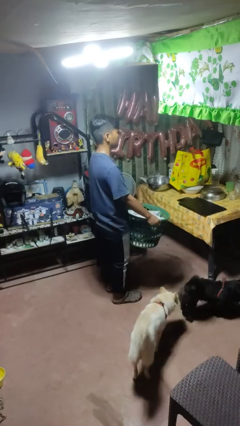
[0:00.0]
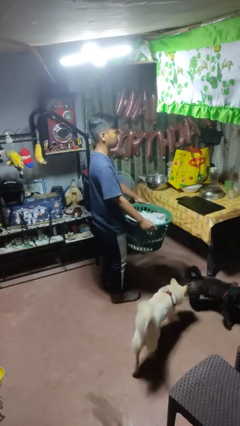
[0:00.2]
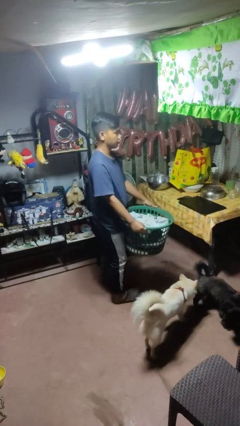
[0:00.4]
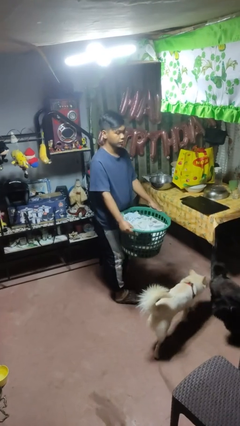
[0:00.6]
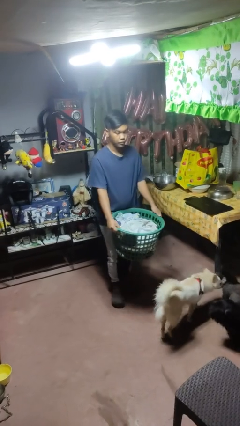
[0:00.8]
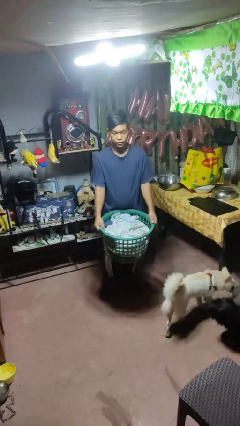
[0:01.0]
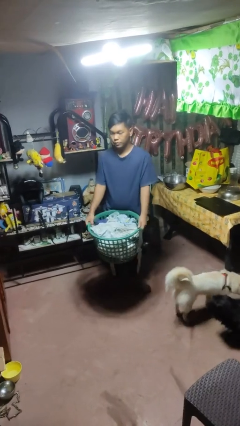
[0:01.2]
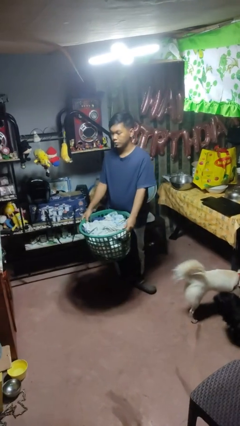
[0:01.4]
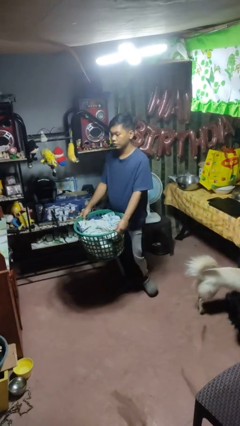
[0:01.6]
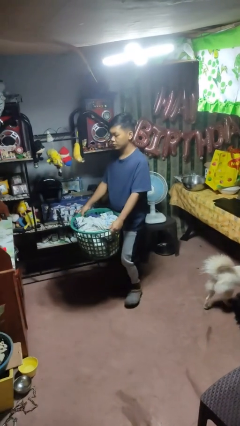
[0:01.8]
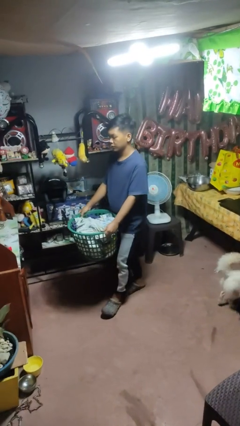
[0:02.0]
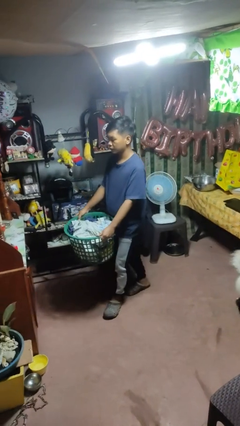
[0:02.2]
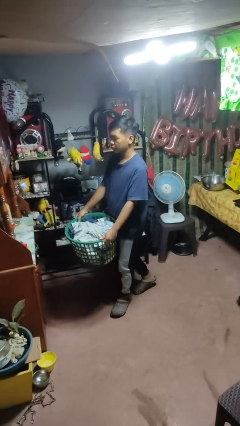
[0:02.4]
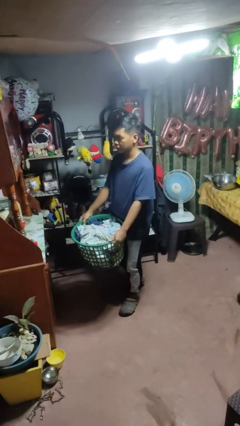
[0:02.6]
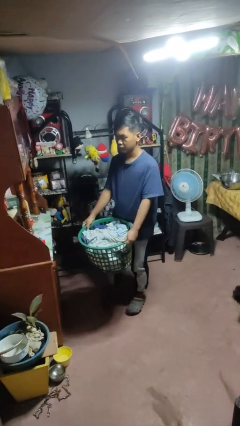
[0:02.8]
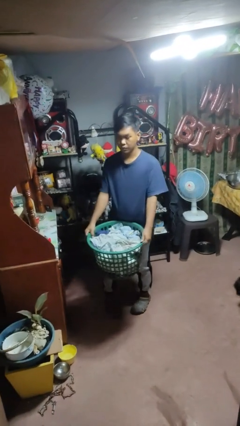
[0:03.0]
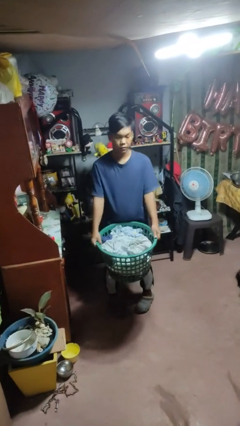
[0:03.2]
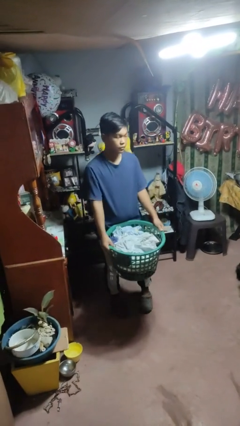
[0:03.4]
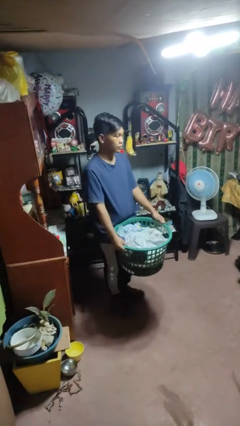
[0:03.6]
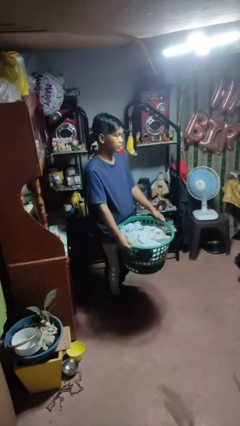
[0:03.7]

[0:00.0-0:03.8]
person carries laundry basket

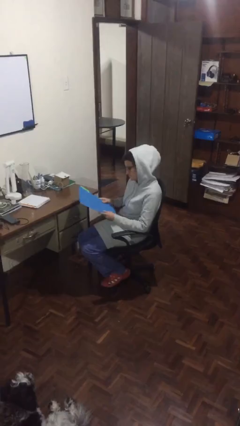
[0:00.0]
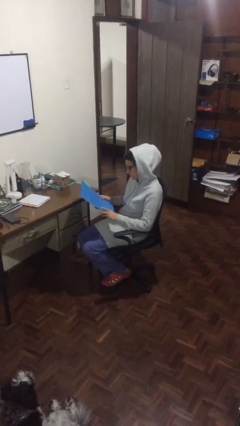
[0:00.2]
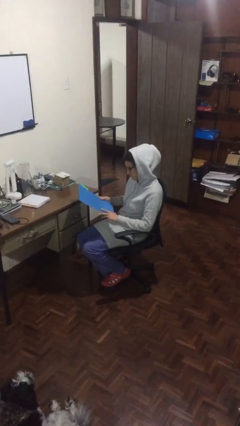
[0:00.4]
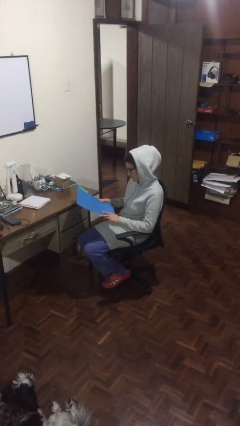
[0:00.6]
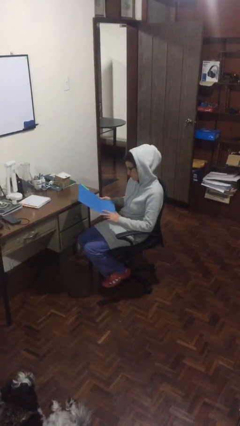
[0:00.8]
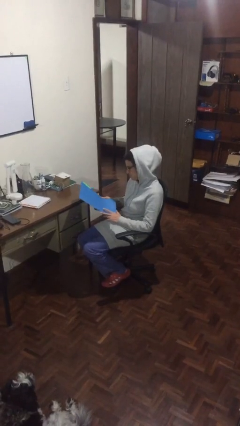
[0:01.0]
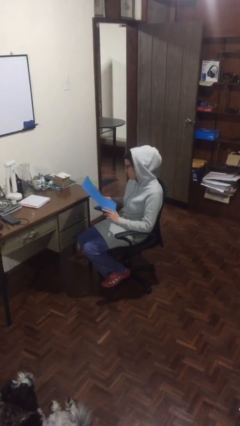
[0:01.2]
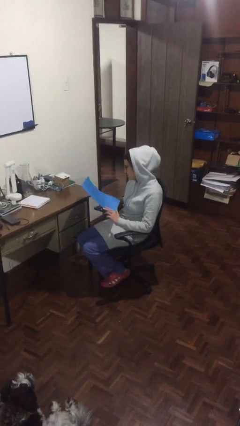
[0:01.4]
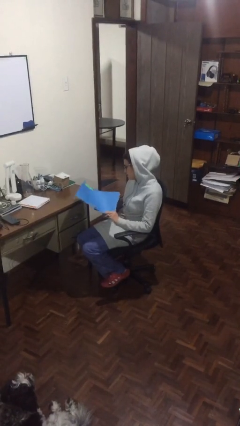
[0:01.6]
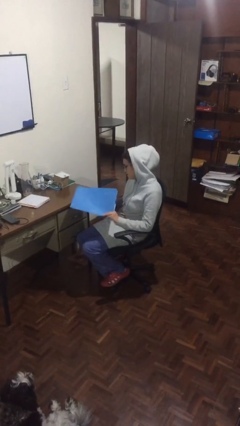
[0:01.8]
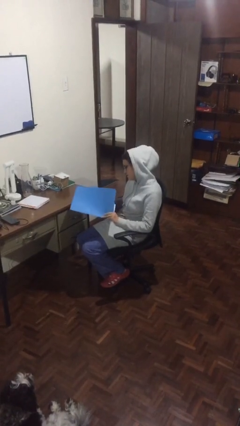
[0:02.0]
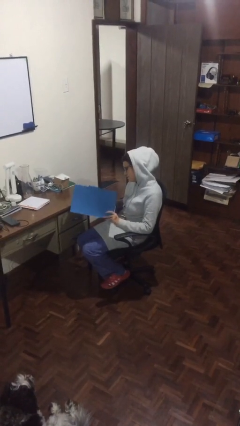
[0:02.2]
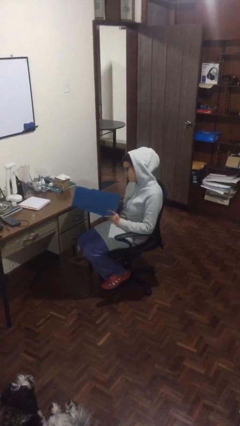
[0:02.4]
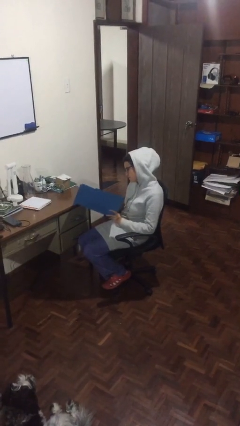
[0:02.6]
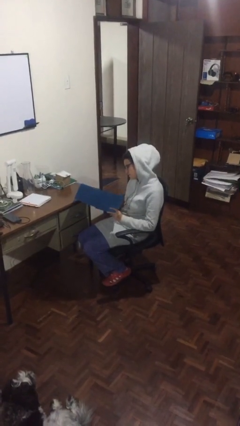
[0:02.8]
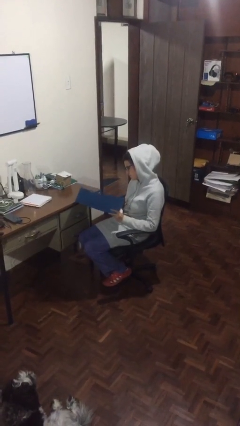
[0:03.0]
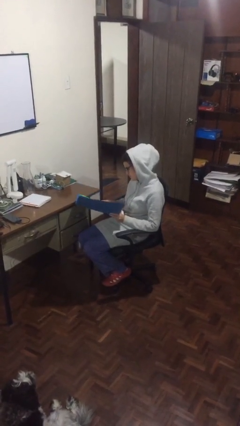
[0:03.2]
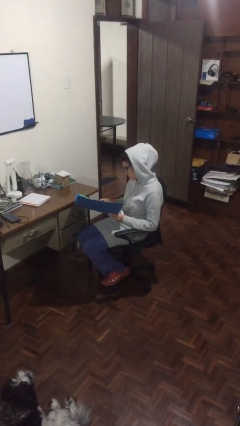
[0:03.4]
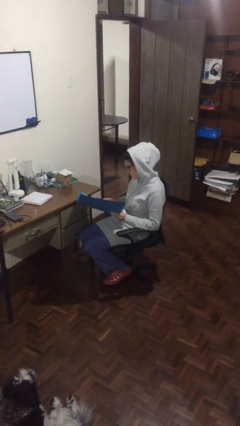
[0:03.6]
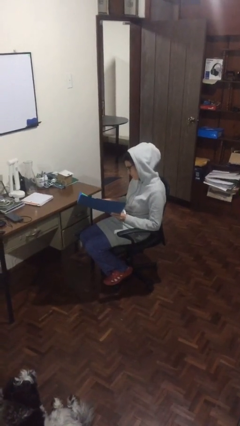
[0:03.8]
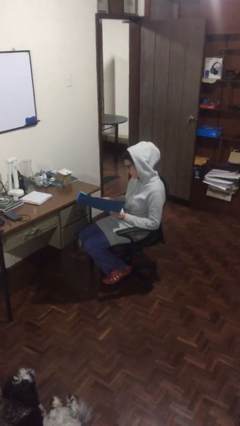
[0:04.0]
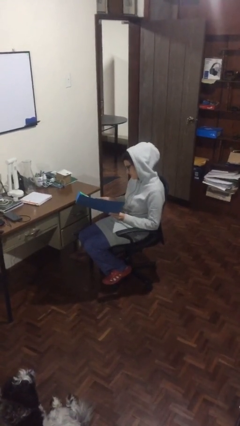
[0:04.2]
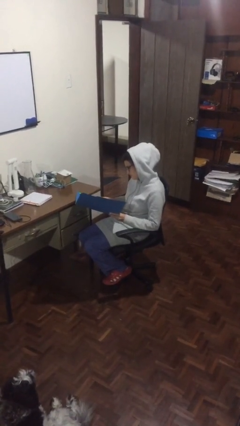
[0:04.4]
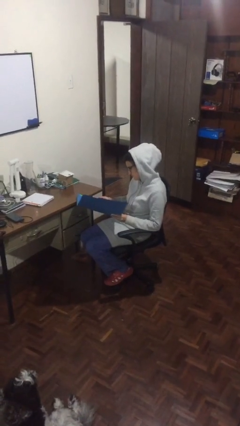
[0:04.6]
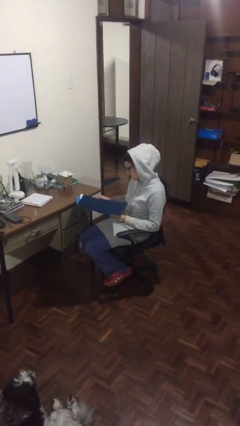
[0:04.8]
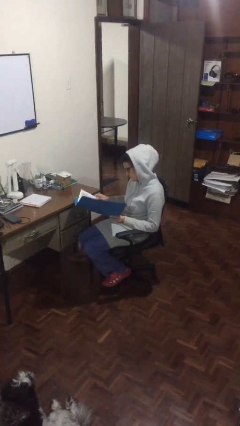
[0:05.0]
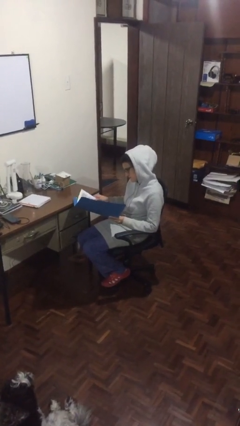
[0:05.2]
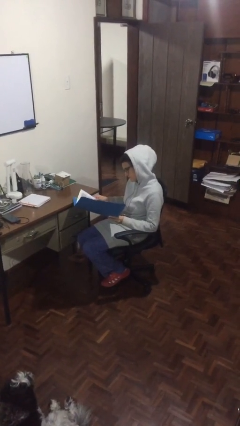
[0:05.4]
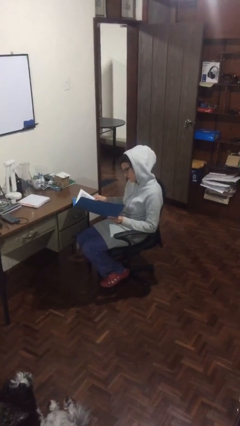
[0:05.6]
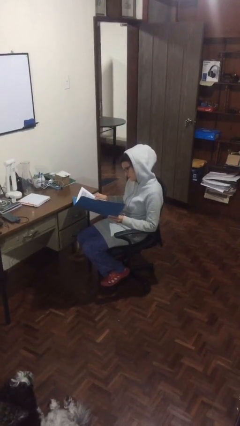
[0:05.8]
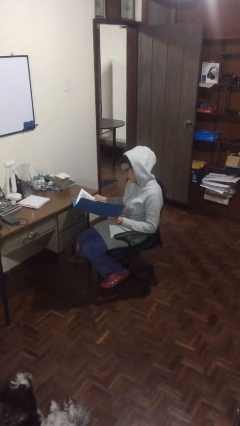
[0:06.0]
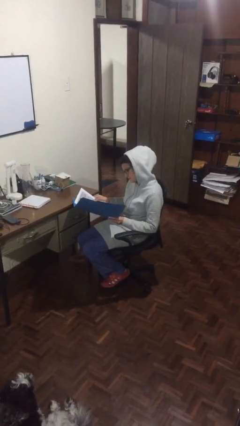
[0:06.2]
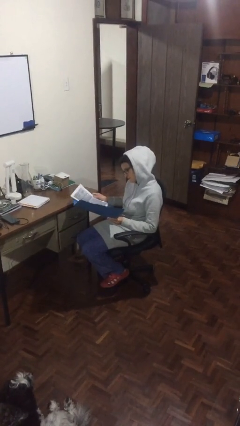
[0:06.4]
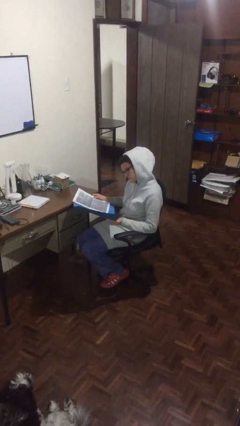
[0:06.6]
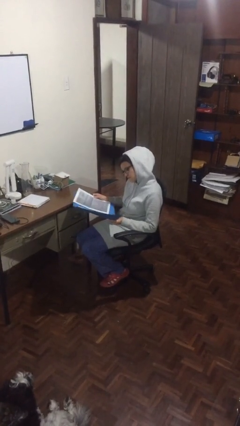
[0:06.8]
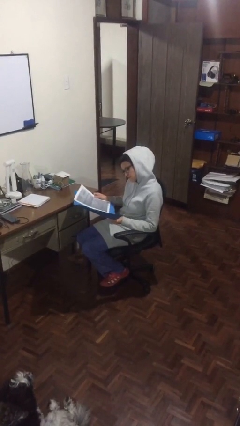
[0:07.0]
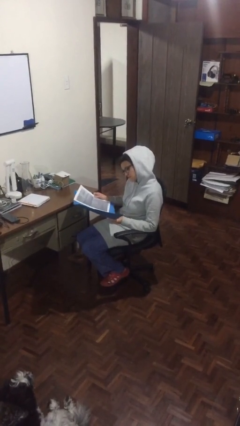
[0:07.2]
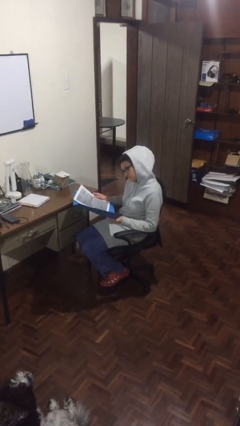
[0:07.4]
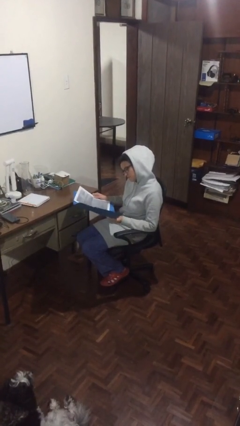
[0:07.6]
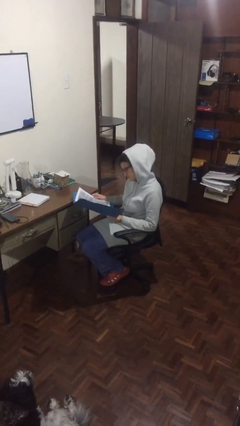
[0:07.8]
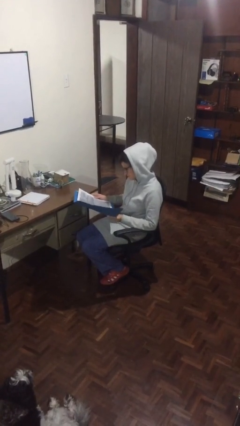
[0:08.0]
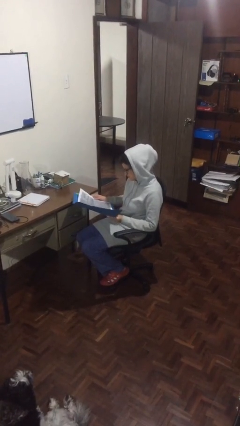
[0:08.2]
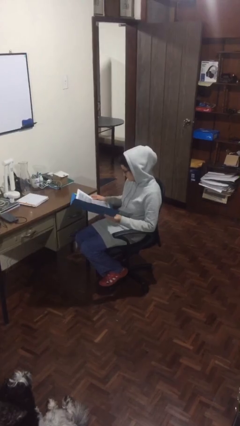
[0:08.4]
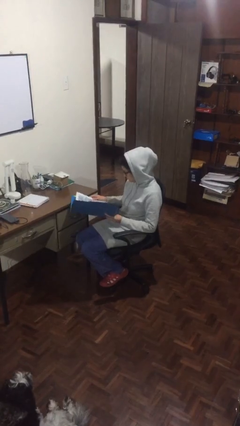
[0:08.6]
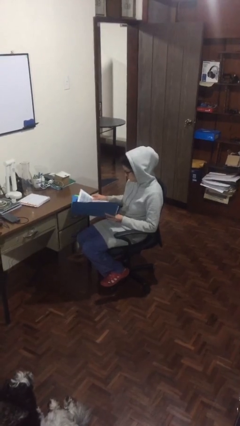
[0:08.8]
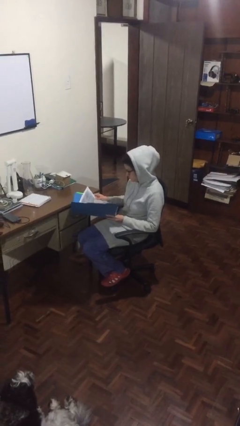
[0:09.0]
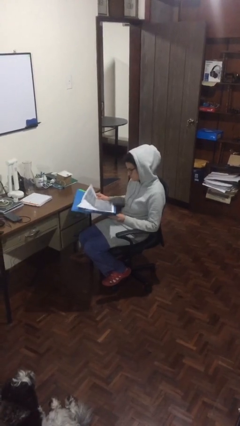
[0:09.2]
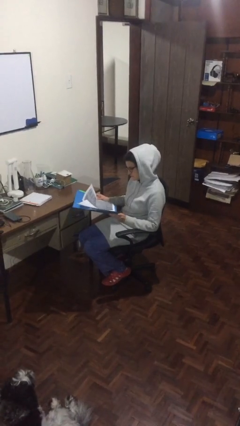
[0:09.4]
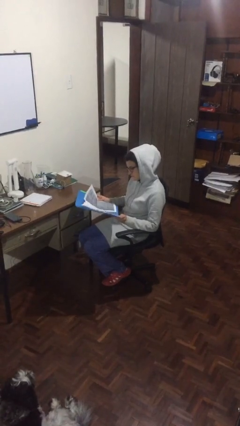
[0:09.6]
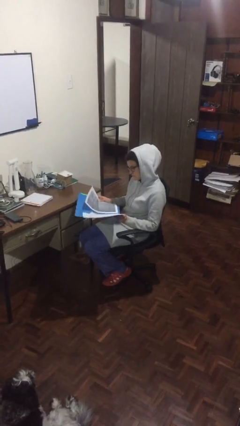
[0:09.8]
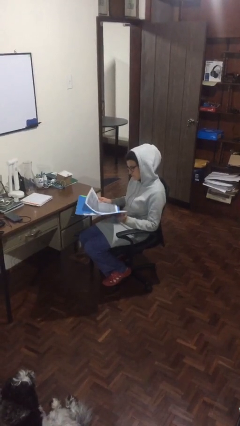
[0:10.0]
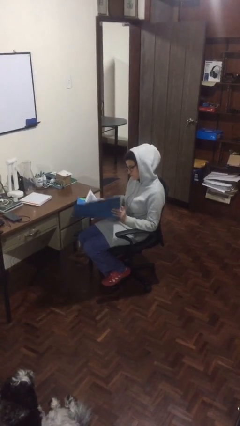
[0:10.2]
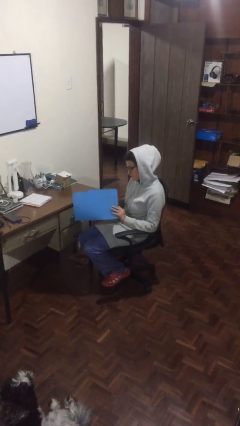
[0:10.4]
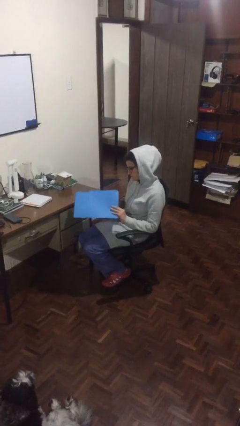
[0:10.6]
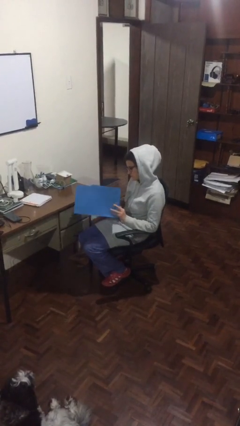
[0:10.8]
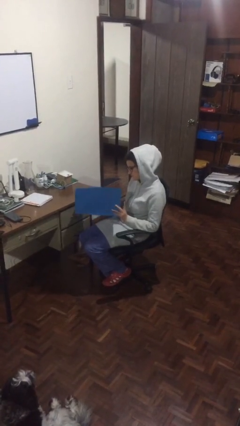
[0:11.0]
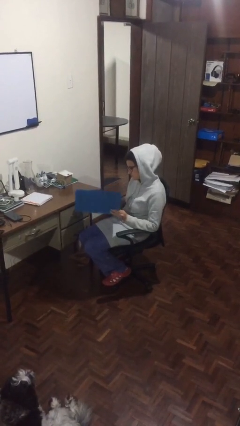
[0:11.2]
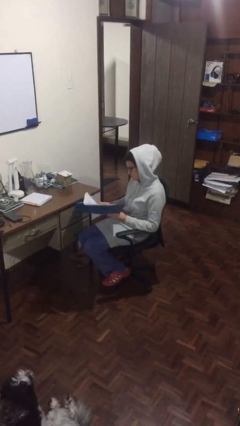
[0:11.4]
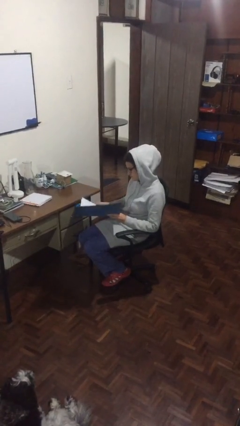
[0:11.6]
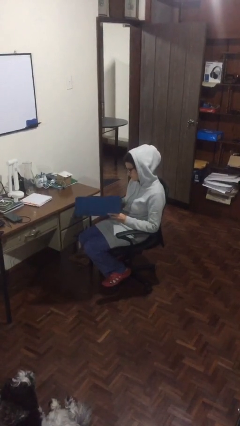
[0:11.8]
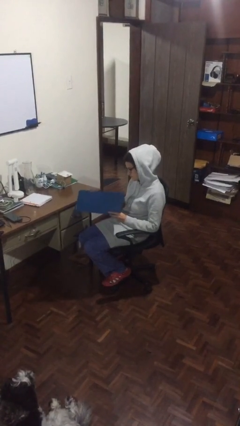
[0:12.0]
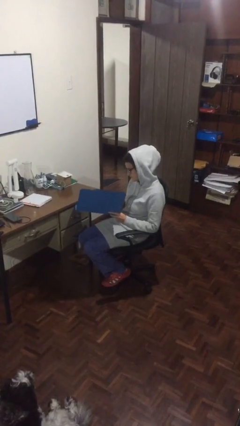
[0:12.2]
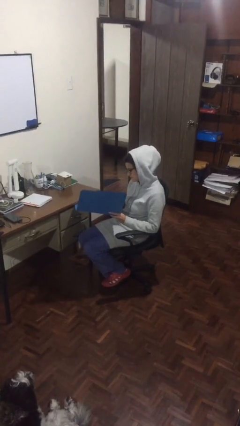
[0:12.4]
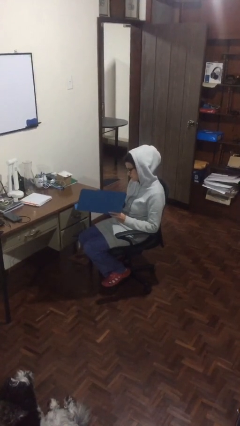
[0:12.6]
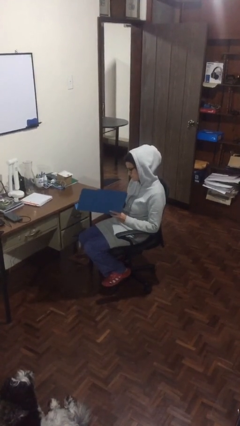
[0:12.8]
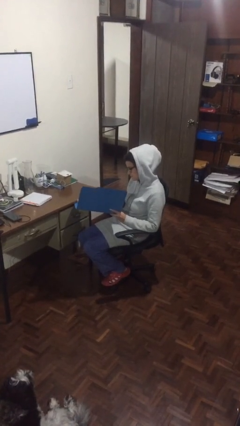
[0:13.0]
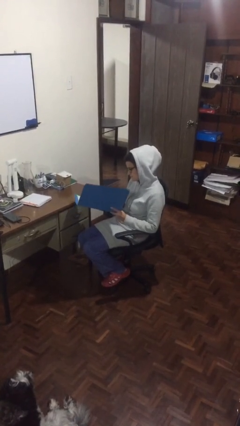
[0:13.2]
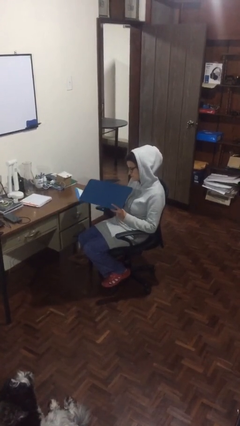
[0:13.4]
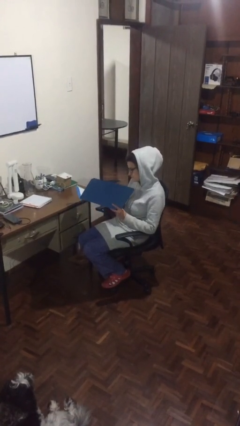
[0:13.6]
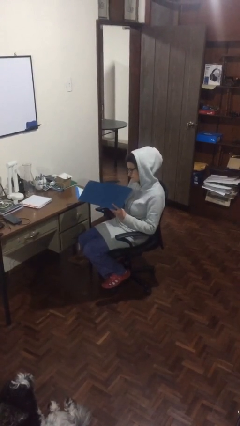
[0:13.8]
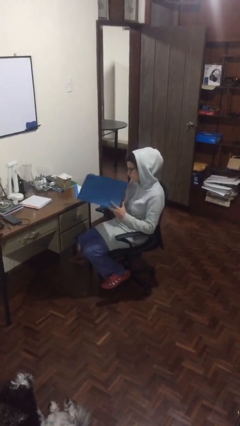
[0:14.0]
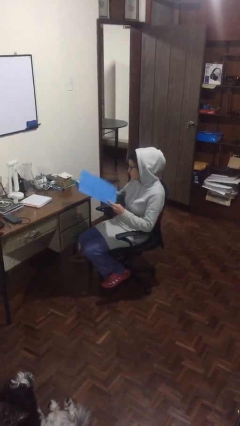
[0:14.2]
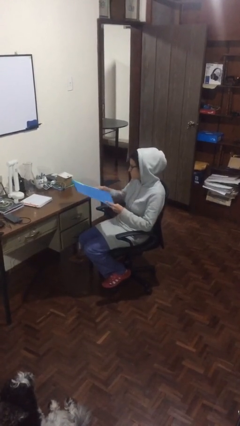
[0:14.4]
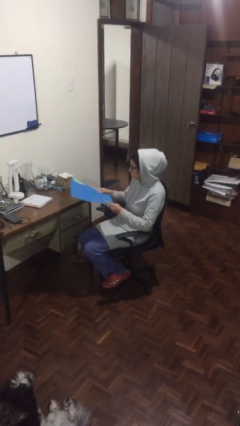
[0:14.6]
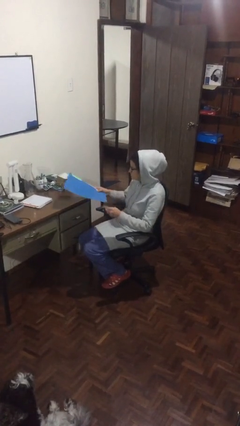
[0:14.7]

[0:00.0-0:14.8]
person reads document
